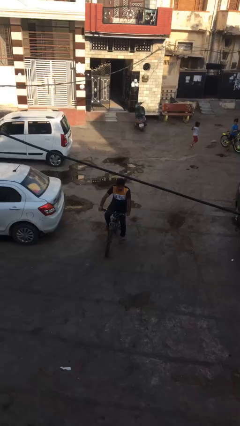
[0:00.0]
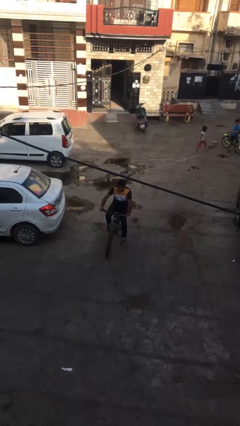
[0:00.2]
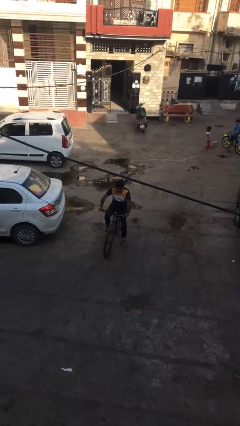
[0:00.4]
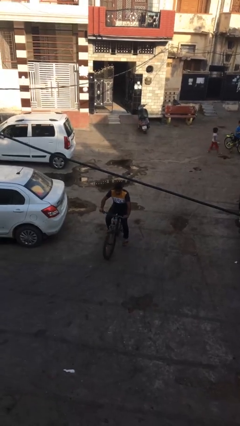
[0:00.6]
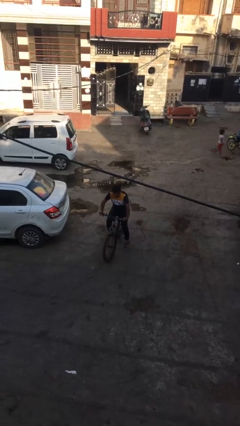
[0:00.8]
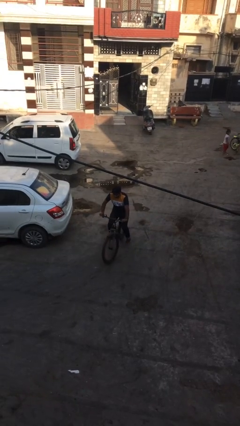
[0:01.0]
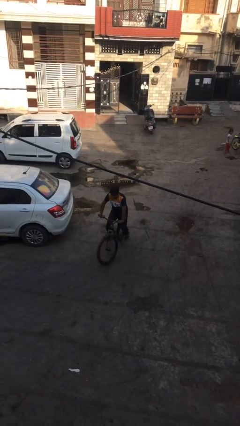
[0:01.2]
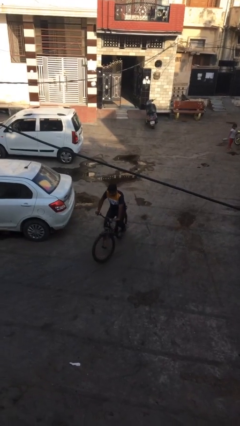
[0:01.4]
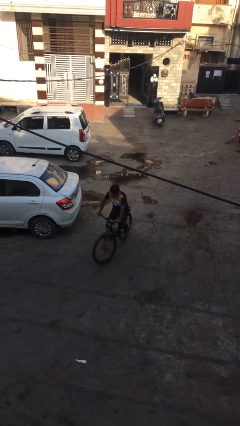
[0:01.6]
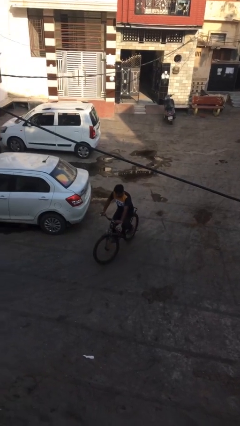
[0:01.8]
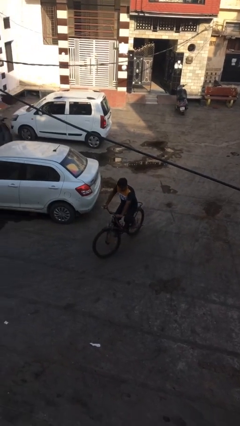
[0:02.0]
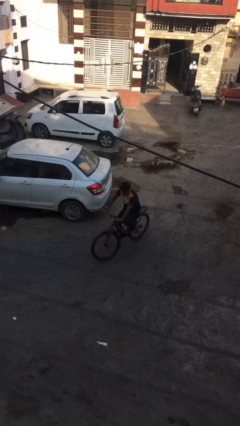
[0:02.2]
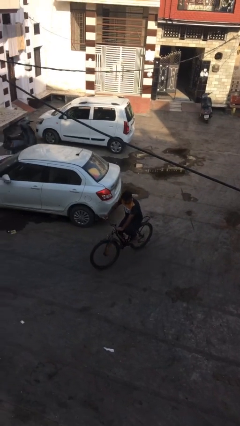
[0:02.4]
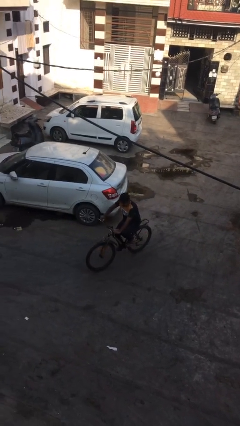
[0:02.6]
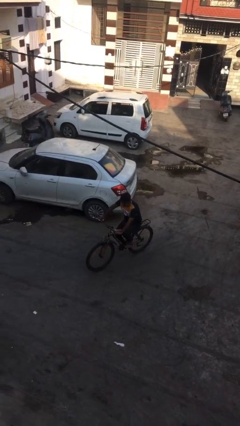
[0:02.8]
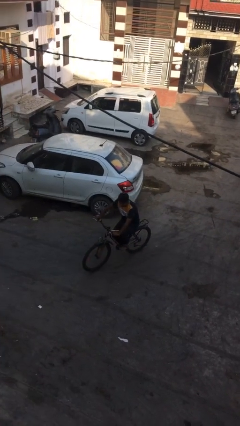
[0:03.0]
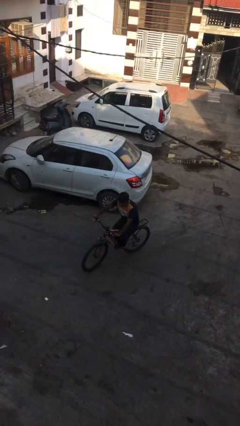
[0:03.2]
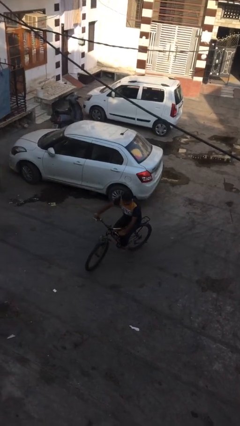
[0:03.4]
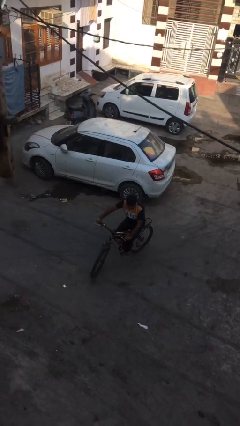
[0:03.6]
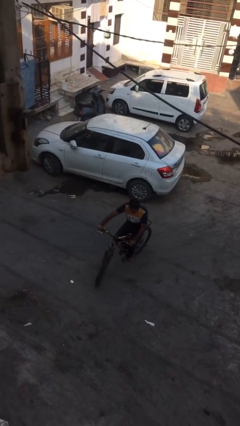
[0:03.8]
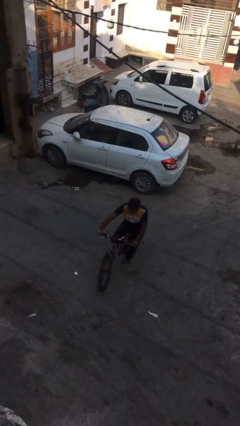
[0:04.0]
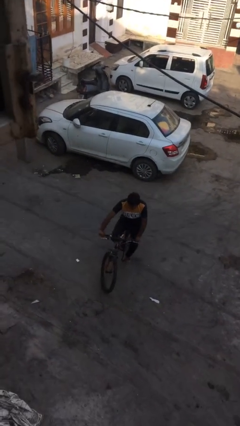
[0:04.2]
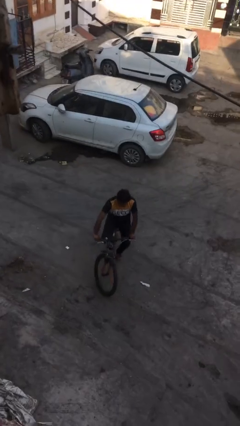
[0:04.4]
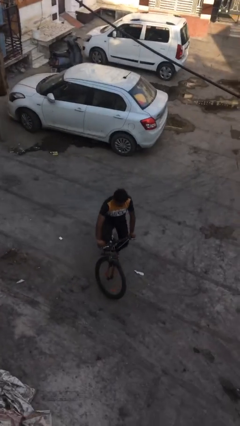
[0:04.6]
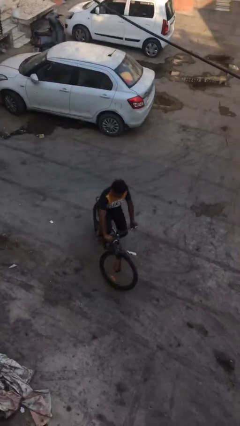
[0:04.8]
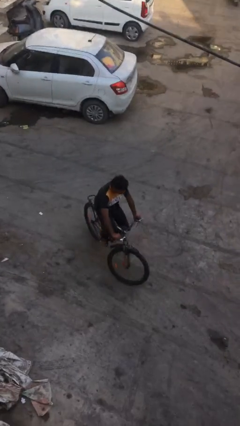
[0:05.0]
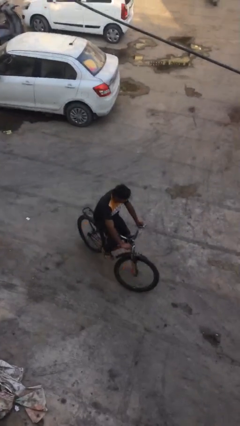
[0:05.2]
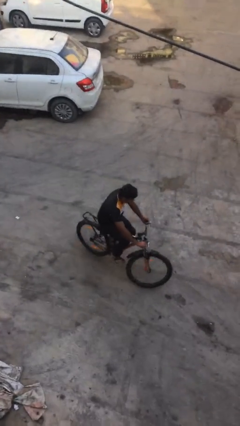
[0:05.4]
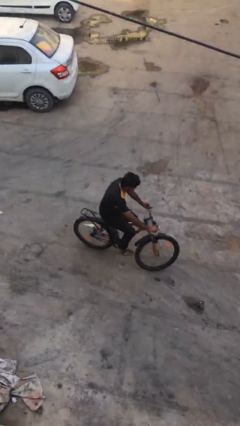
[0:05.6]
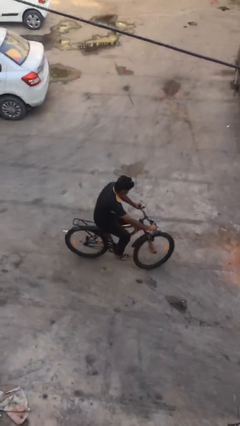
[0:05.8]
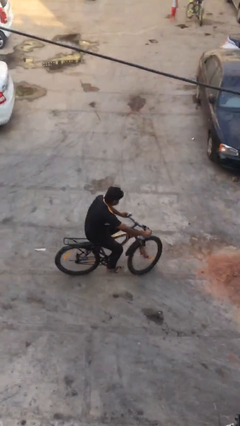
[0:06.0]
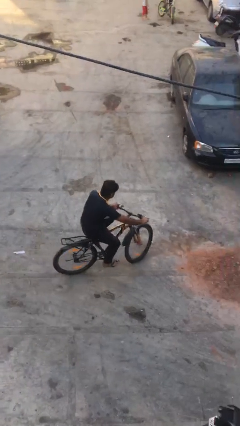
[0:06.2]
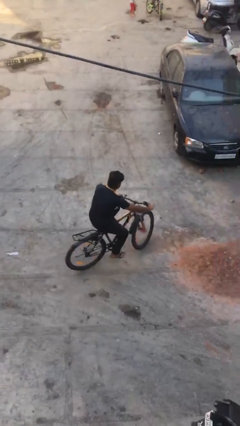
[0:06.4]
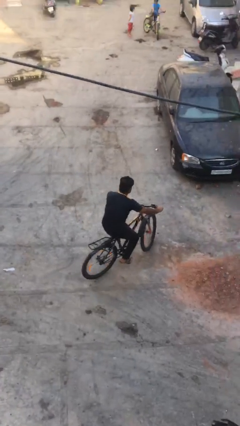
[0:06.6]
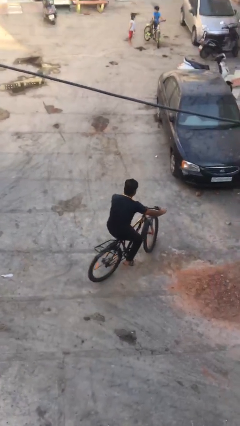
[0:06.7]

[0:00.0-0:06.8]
person rides bicycle

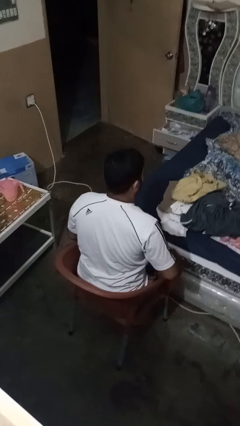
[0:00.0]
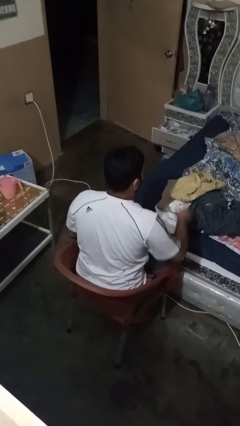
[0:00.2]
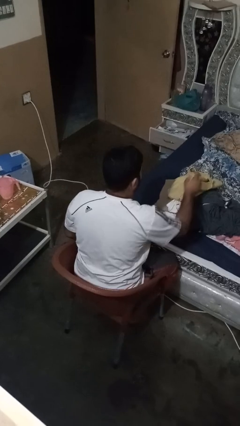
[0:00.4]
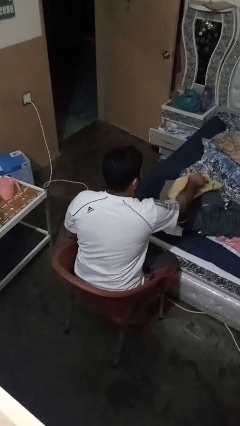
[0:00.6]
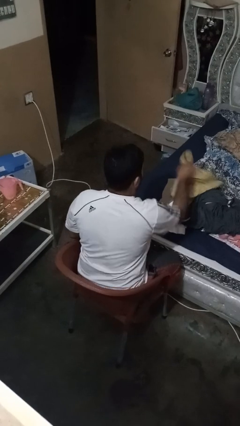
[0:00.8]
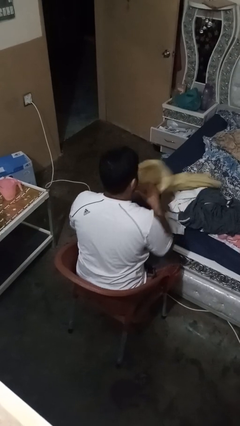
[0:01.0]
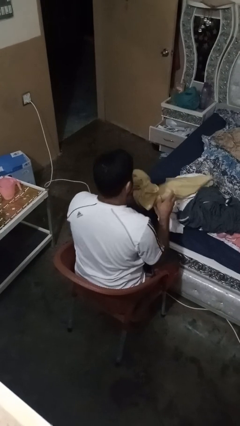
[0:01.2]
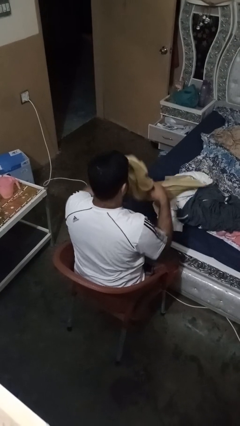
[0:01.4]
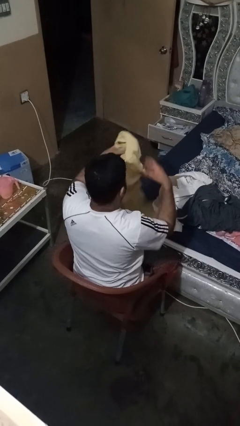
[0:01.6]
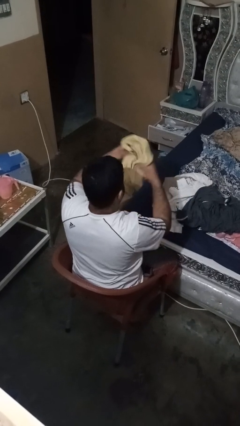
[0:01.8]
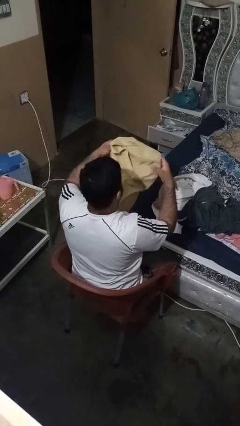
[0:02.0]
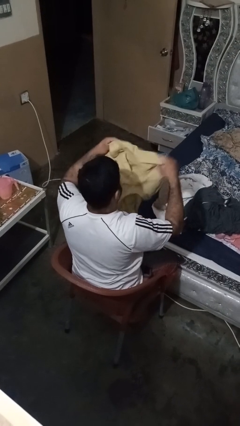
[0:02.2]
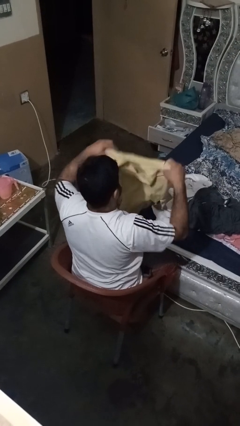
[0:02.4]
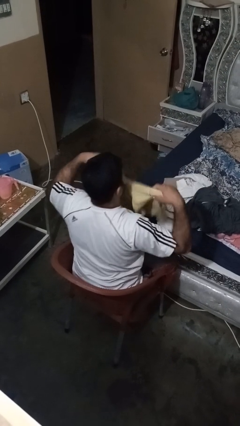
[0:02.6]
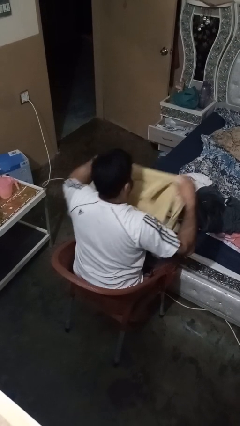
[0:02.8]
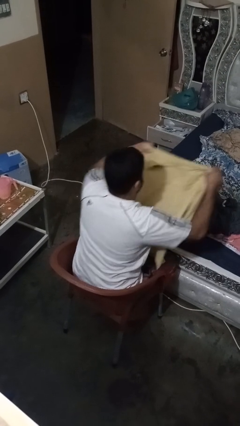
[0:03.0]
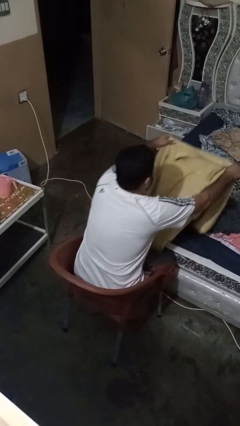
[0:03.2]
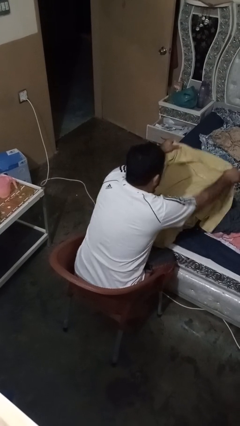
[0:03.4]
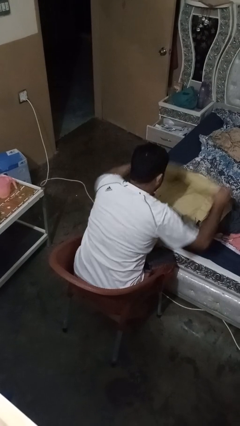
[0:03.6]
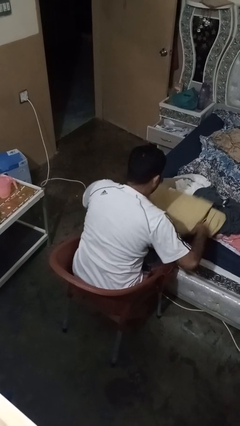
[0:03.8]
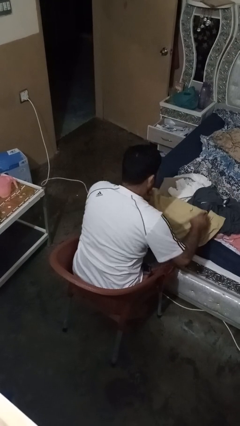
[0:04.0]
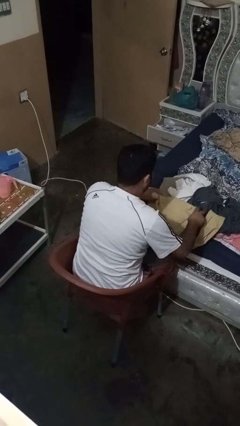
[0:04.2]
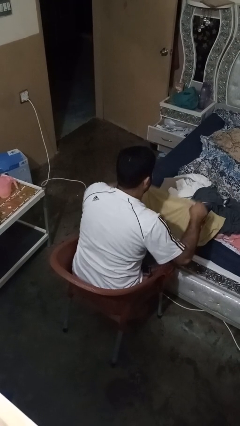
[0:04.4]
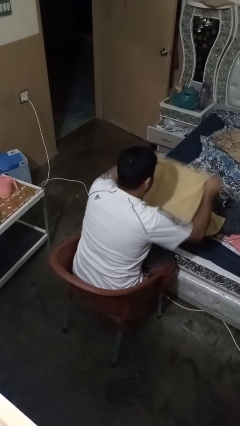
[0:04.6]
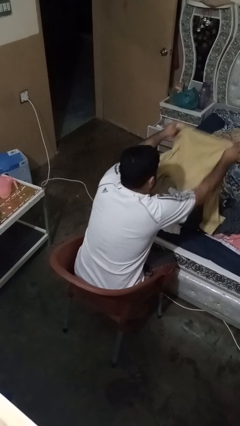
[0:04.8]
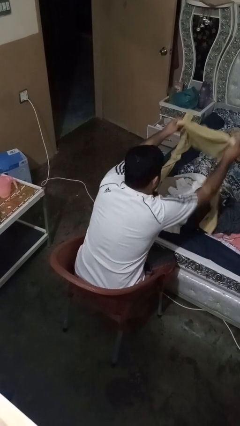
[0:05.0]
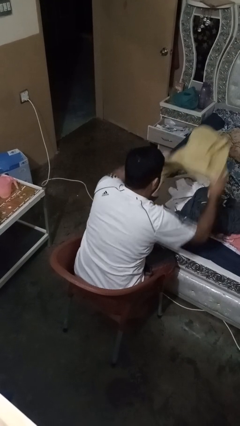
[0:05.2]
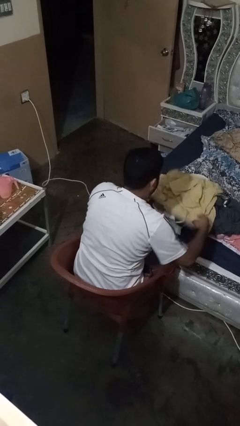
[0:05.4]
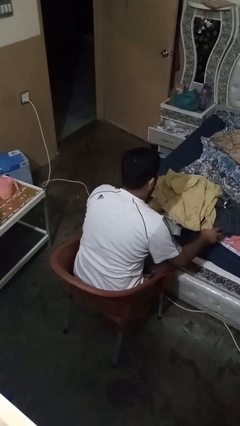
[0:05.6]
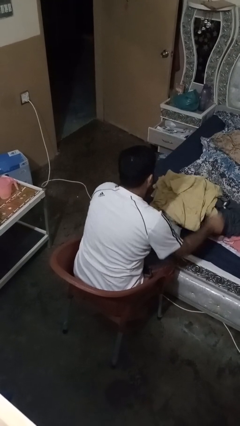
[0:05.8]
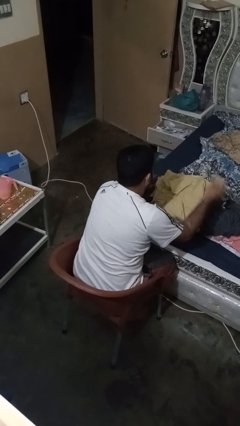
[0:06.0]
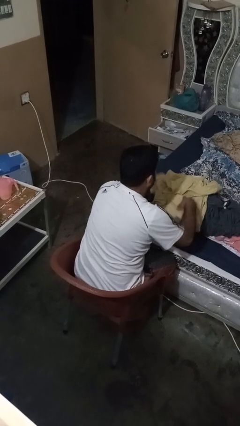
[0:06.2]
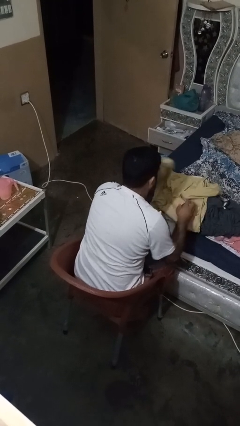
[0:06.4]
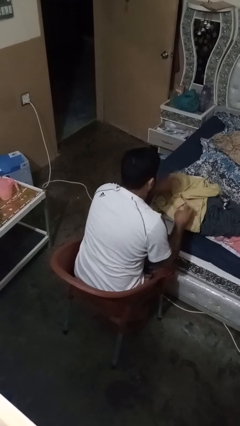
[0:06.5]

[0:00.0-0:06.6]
person folds shirt

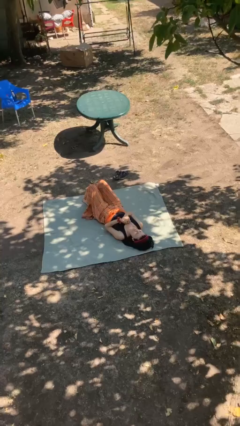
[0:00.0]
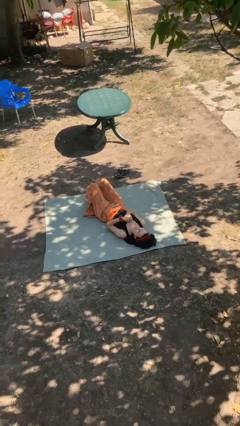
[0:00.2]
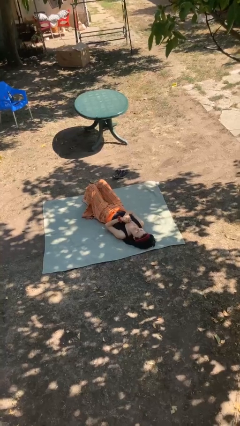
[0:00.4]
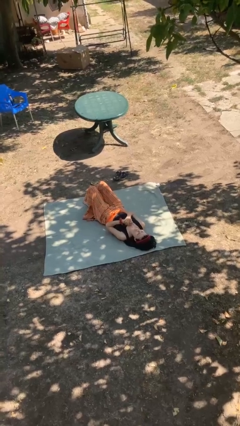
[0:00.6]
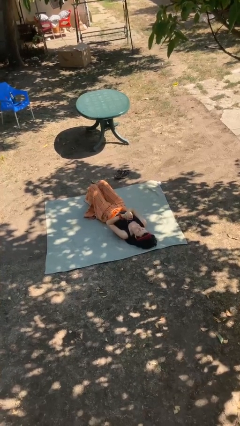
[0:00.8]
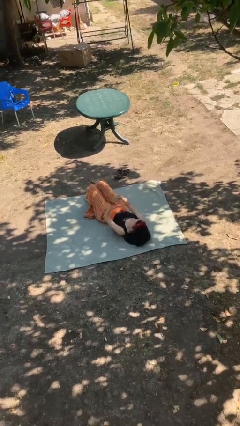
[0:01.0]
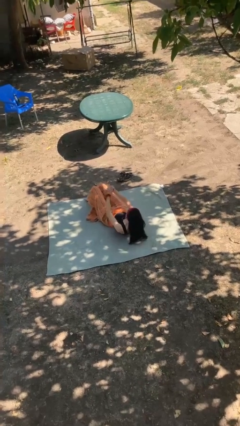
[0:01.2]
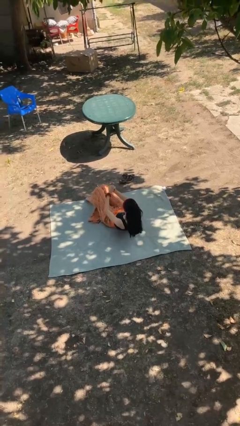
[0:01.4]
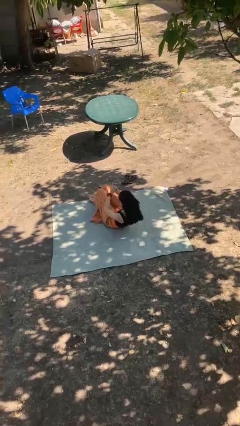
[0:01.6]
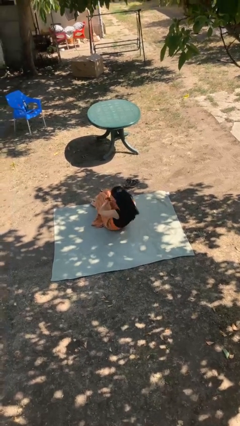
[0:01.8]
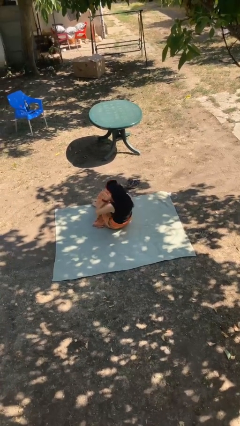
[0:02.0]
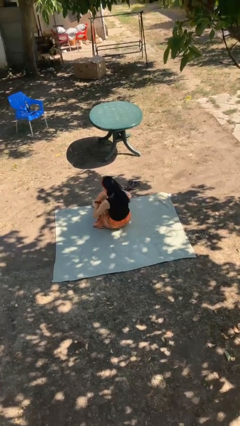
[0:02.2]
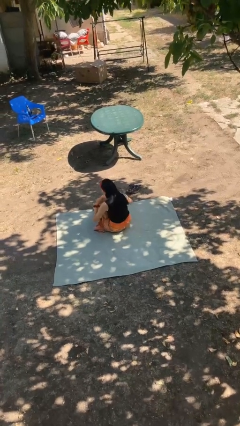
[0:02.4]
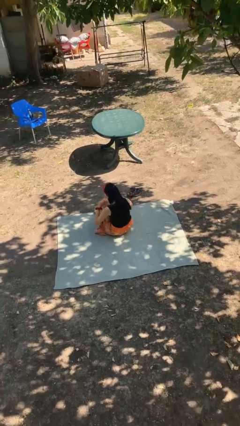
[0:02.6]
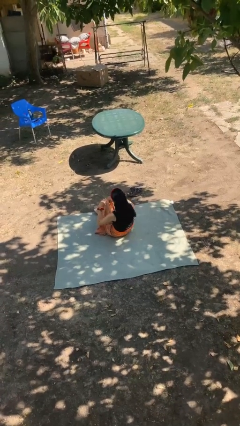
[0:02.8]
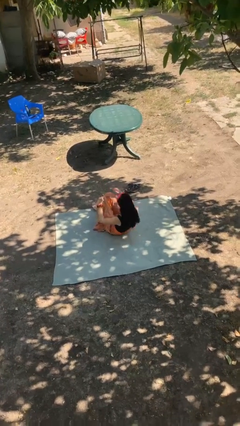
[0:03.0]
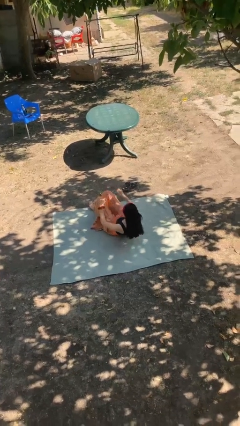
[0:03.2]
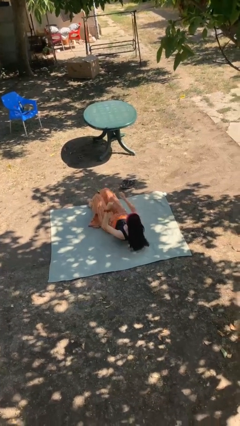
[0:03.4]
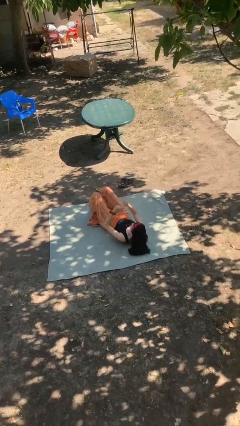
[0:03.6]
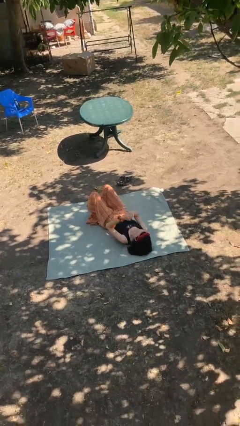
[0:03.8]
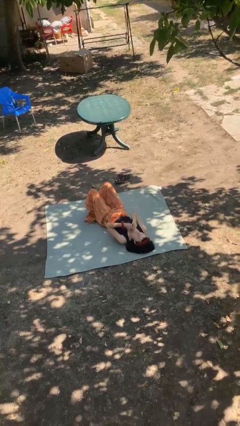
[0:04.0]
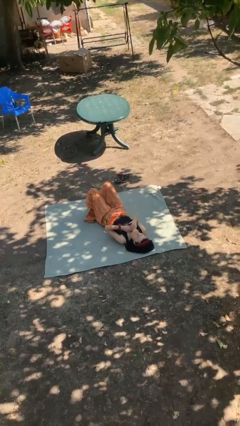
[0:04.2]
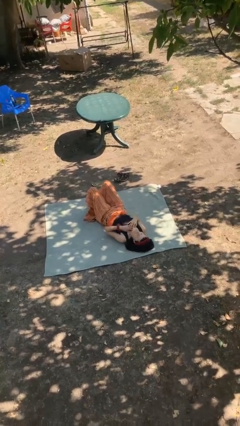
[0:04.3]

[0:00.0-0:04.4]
person exercises with situp
